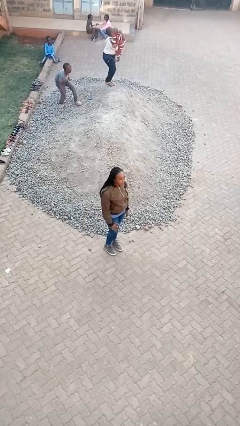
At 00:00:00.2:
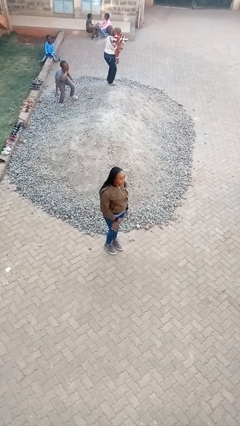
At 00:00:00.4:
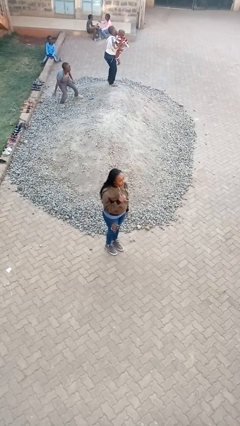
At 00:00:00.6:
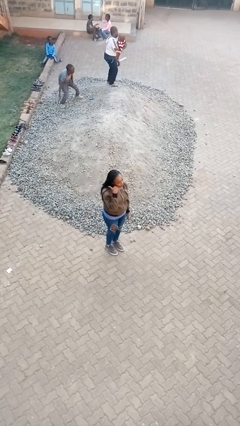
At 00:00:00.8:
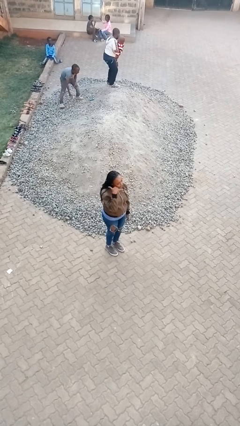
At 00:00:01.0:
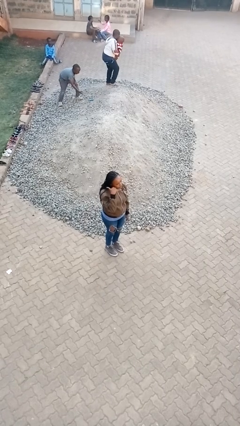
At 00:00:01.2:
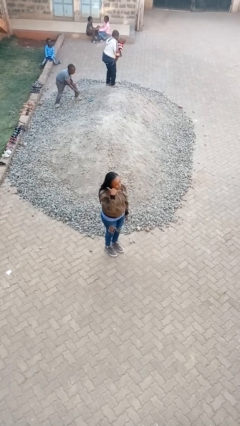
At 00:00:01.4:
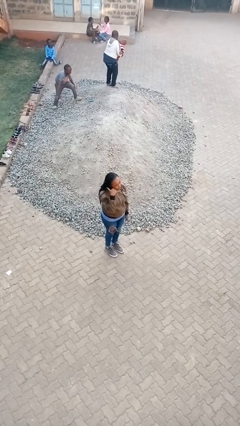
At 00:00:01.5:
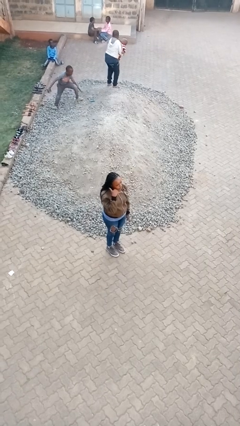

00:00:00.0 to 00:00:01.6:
person gestures call me

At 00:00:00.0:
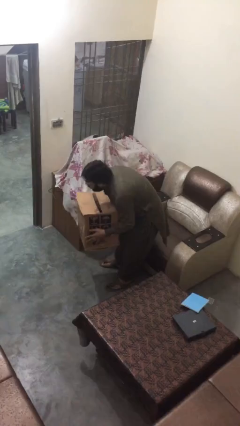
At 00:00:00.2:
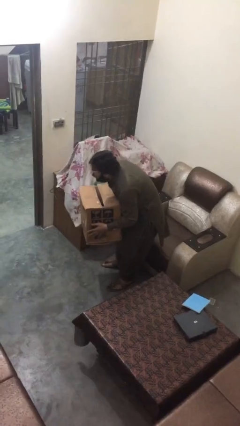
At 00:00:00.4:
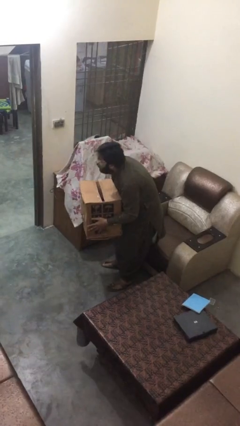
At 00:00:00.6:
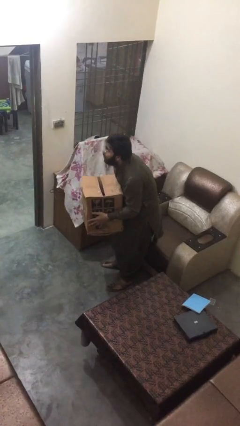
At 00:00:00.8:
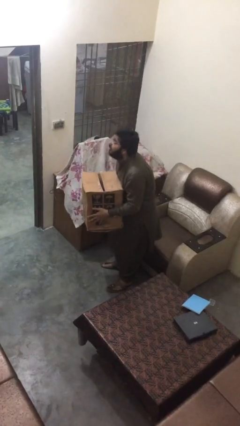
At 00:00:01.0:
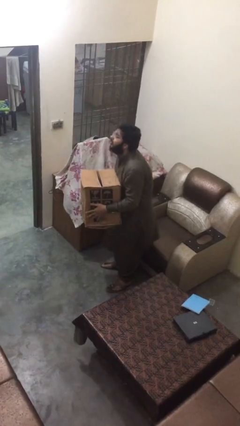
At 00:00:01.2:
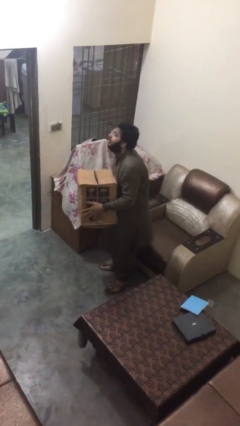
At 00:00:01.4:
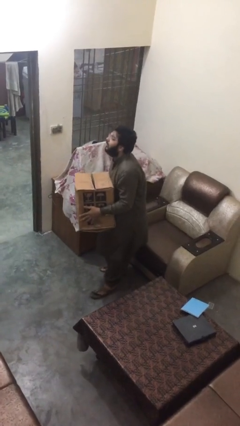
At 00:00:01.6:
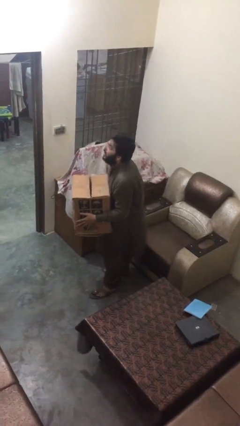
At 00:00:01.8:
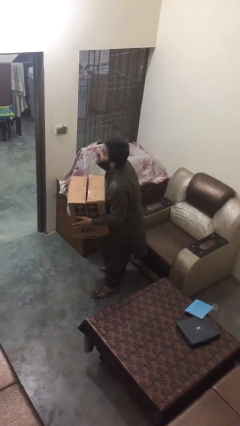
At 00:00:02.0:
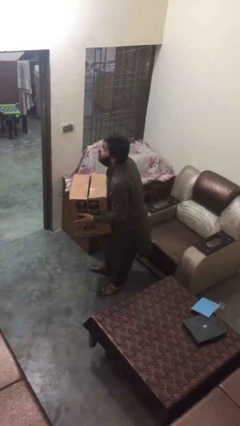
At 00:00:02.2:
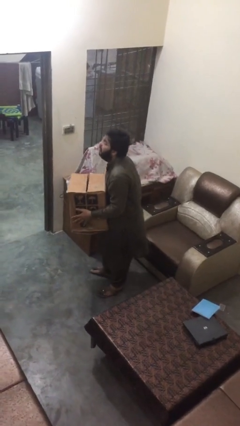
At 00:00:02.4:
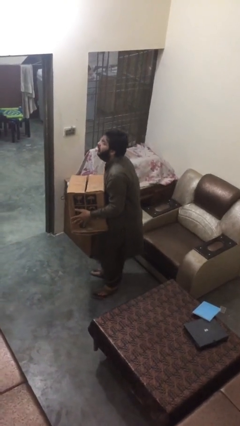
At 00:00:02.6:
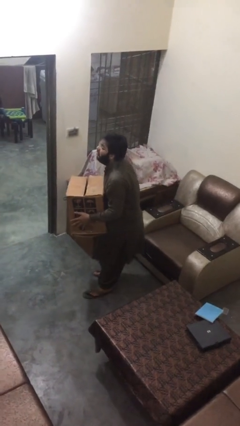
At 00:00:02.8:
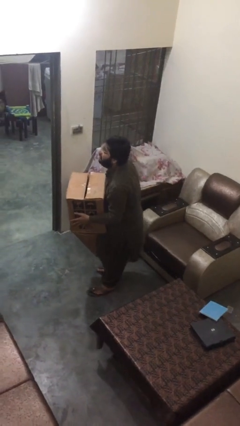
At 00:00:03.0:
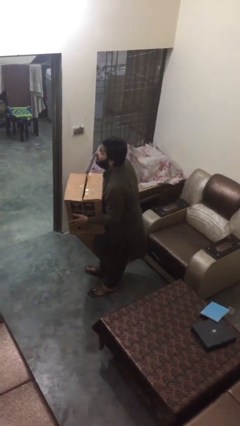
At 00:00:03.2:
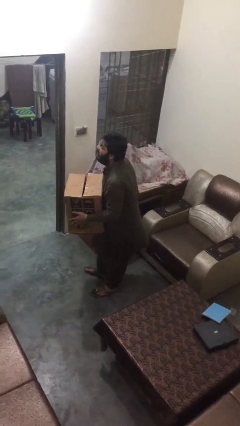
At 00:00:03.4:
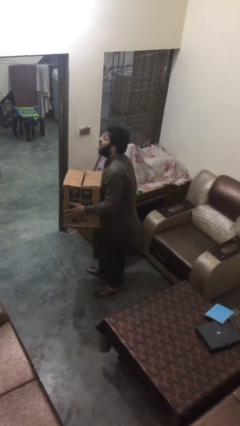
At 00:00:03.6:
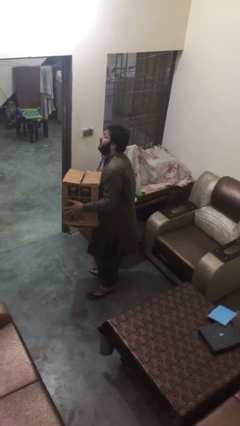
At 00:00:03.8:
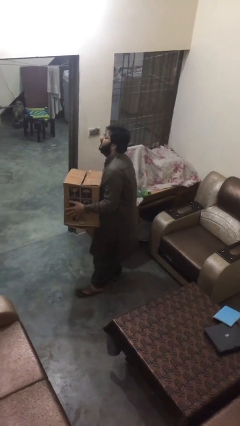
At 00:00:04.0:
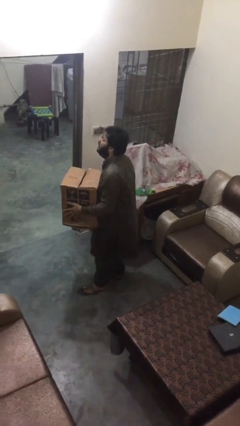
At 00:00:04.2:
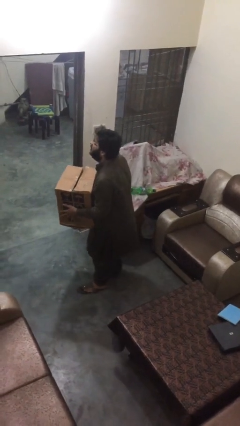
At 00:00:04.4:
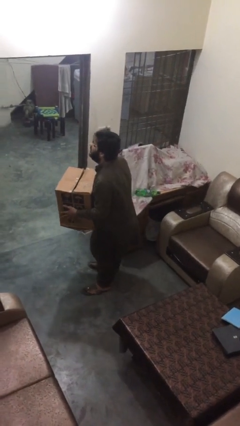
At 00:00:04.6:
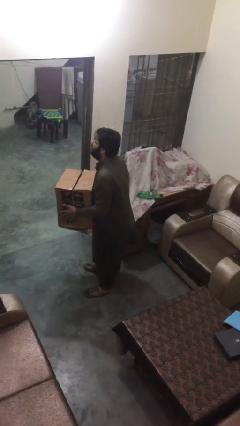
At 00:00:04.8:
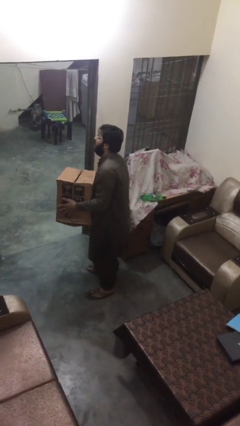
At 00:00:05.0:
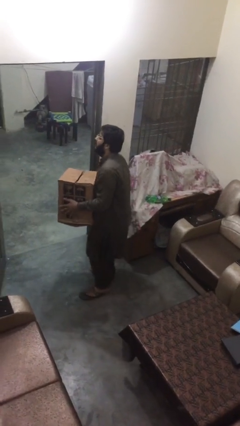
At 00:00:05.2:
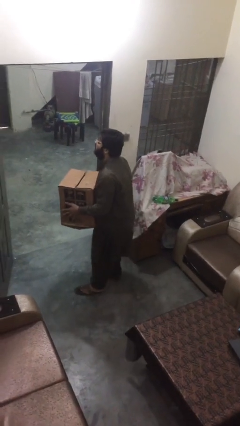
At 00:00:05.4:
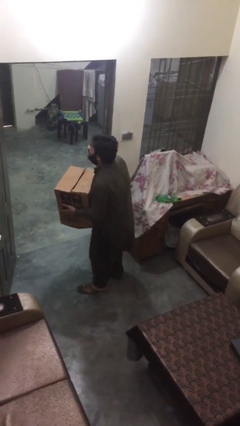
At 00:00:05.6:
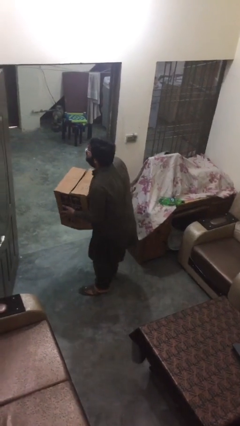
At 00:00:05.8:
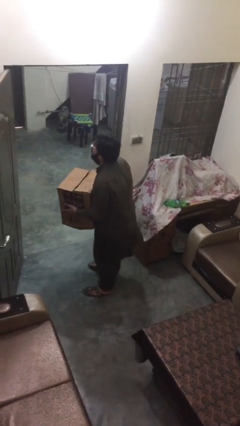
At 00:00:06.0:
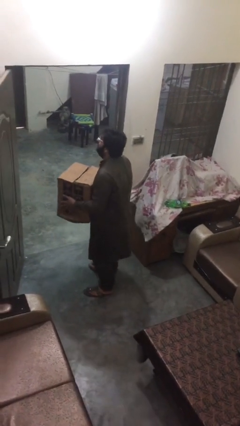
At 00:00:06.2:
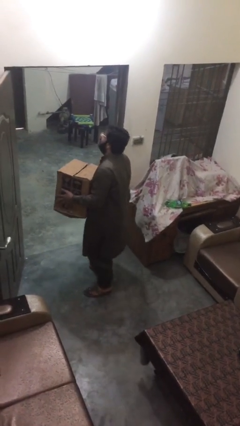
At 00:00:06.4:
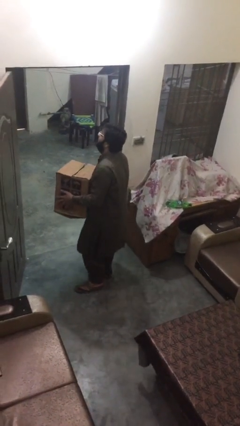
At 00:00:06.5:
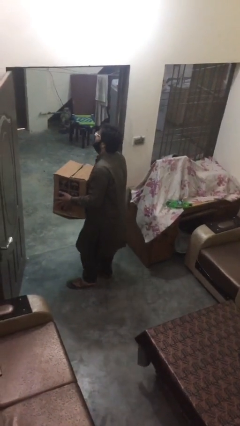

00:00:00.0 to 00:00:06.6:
person carries heavy object

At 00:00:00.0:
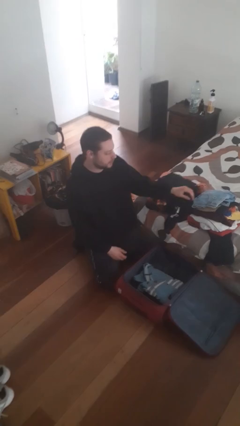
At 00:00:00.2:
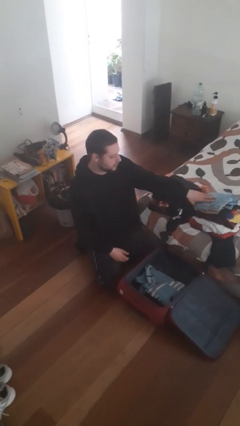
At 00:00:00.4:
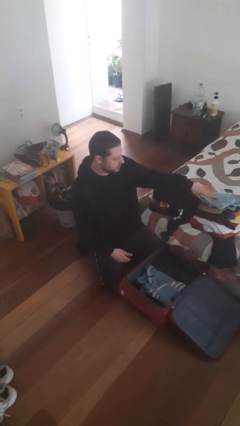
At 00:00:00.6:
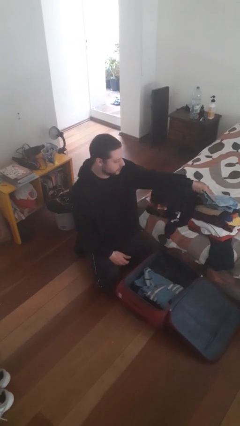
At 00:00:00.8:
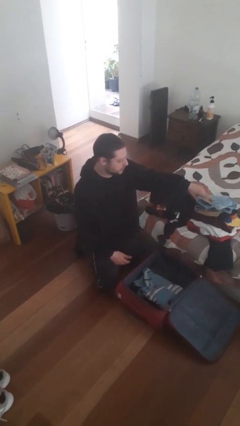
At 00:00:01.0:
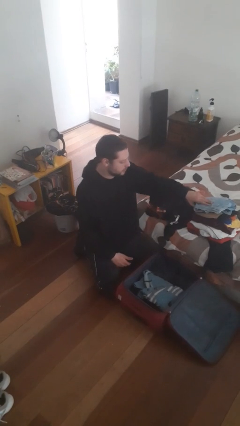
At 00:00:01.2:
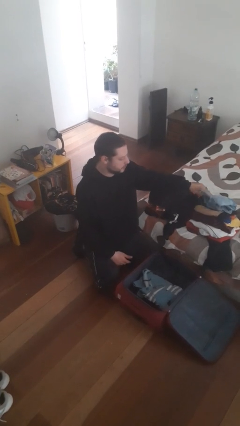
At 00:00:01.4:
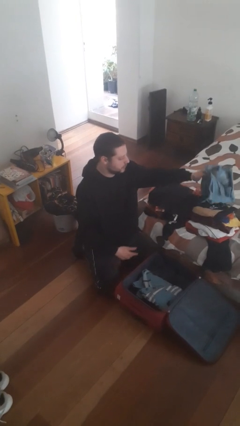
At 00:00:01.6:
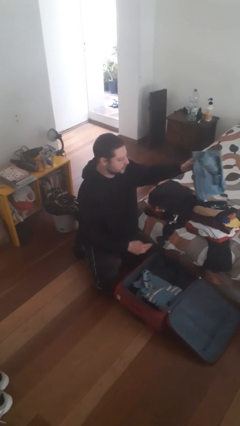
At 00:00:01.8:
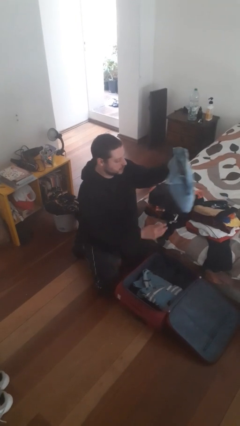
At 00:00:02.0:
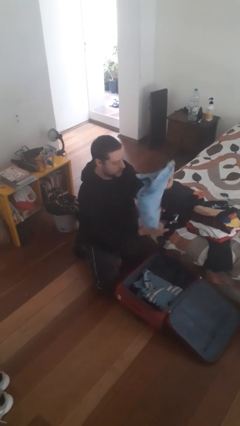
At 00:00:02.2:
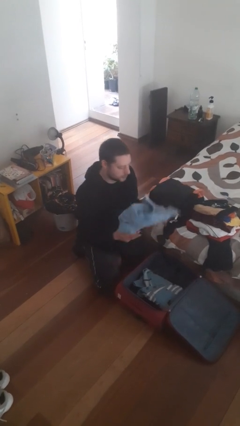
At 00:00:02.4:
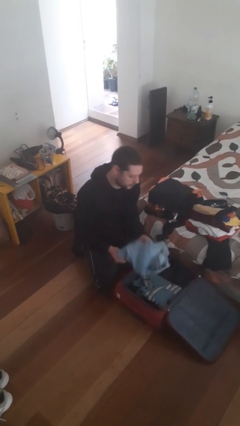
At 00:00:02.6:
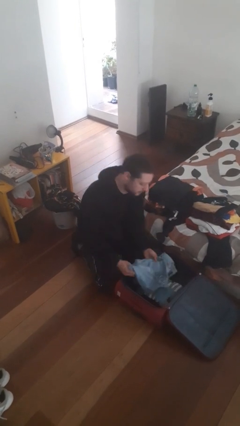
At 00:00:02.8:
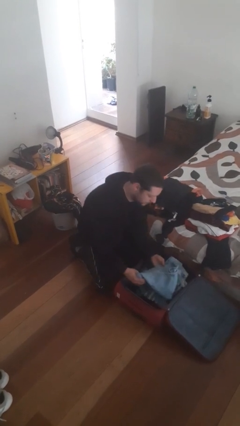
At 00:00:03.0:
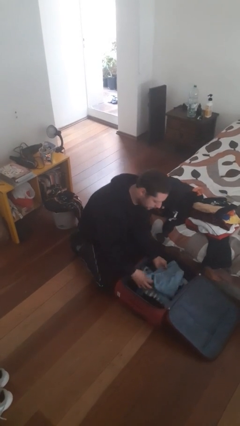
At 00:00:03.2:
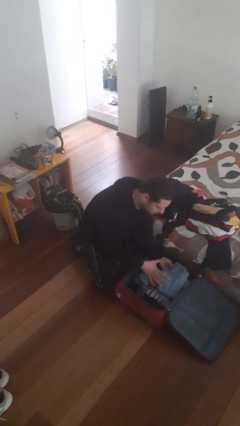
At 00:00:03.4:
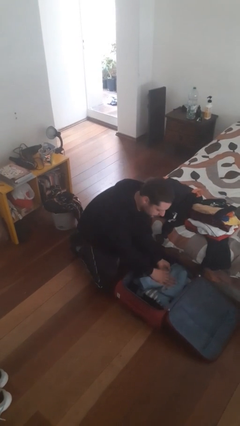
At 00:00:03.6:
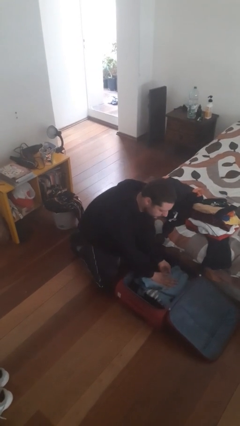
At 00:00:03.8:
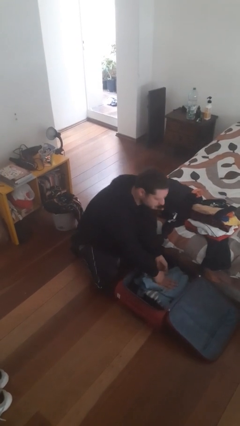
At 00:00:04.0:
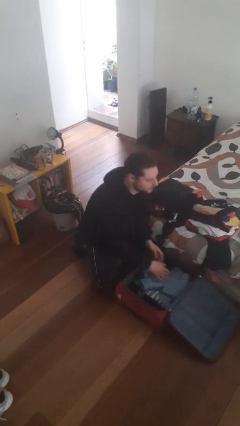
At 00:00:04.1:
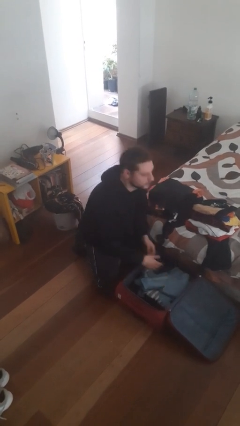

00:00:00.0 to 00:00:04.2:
person loads clothes into suitcase

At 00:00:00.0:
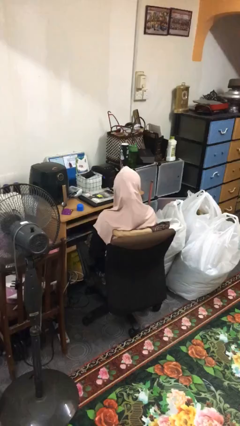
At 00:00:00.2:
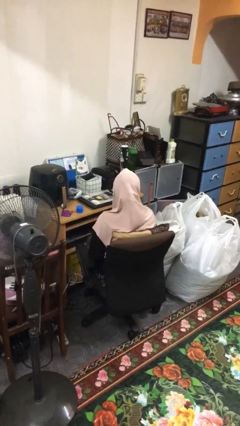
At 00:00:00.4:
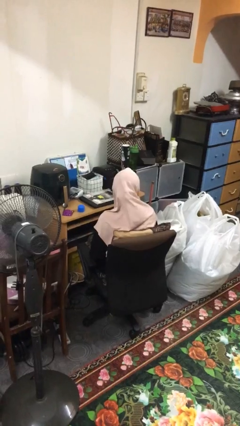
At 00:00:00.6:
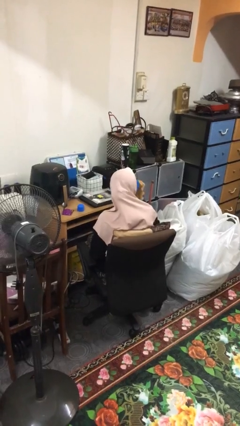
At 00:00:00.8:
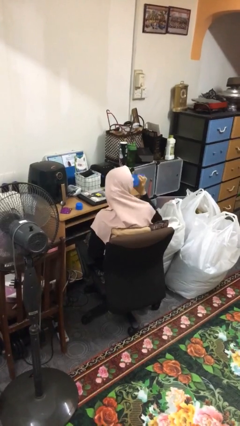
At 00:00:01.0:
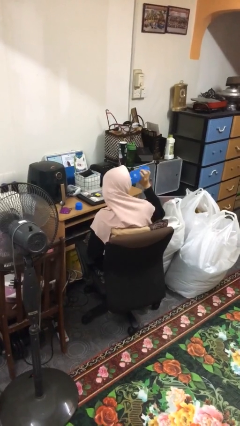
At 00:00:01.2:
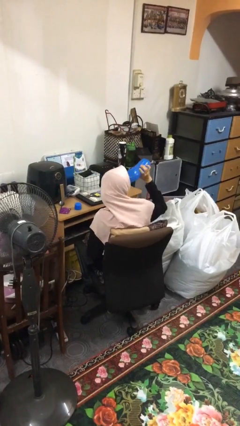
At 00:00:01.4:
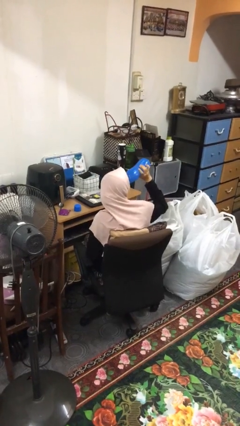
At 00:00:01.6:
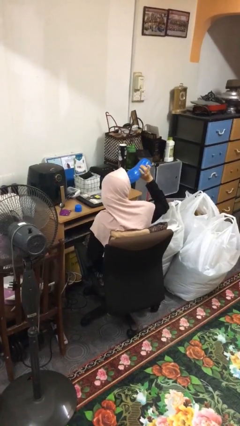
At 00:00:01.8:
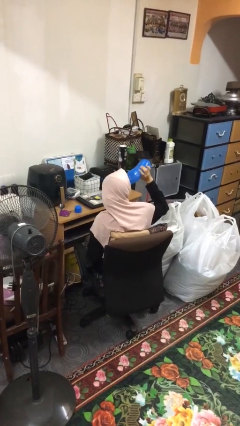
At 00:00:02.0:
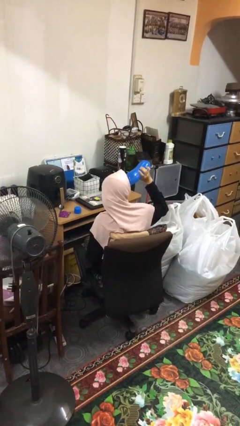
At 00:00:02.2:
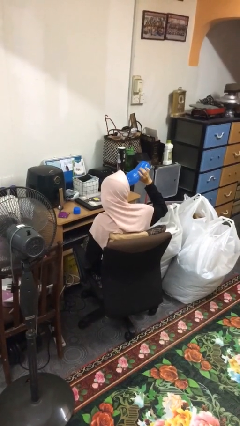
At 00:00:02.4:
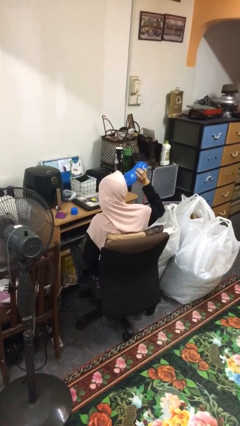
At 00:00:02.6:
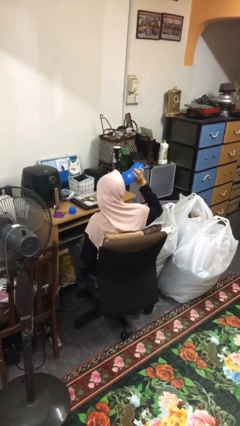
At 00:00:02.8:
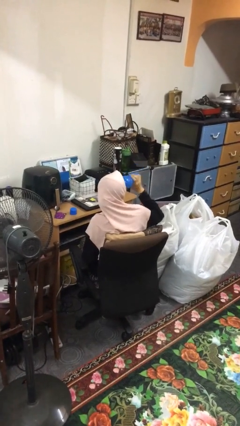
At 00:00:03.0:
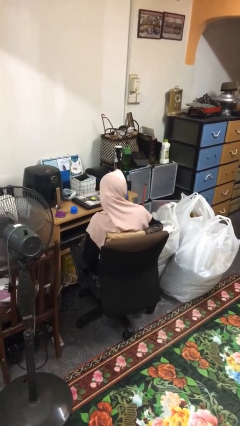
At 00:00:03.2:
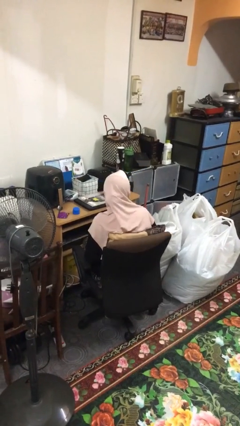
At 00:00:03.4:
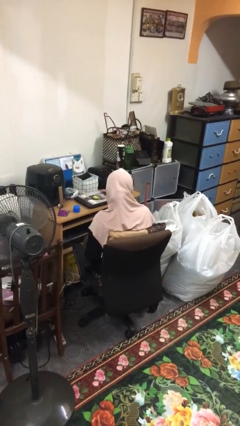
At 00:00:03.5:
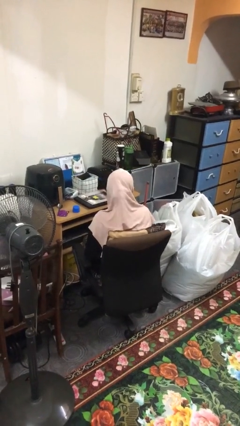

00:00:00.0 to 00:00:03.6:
person drinks from bottle

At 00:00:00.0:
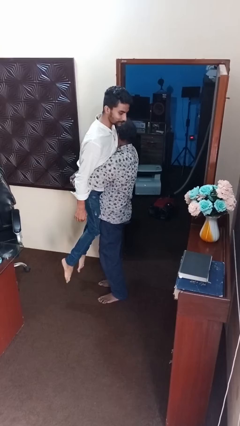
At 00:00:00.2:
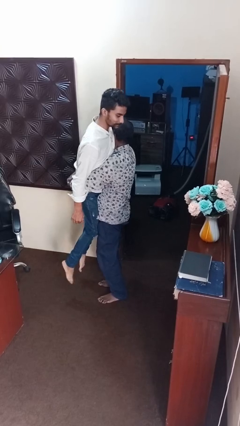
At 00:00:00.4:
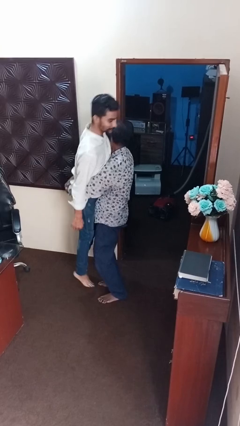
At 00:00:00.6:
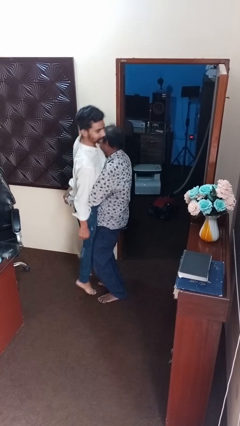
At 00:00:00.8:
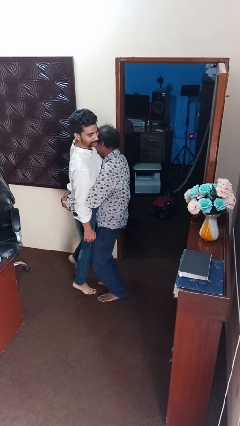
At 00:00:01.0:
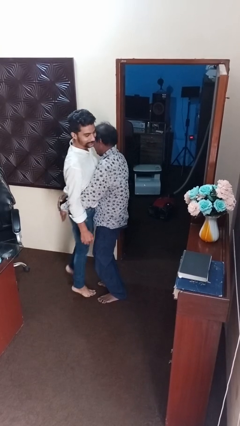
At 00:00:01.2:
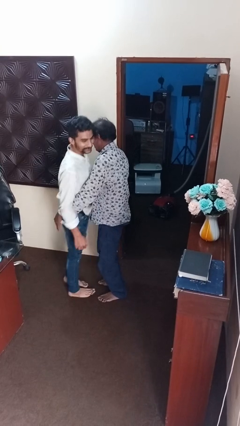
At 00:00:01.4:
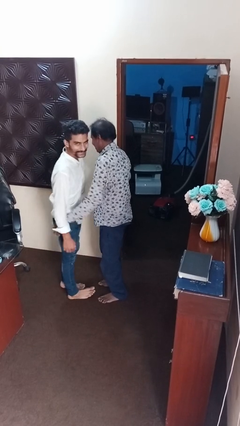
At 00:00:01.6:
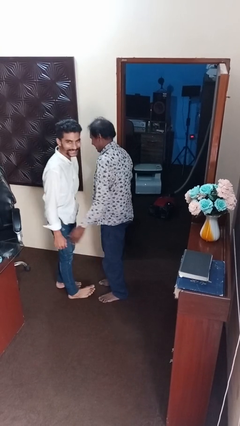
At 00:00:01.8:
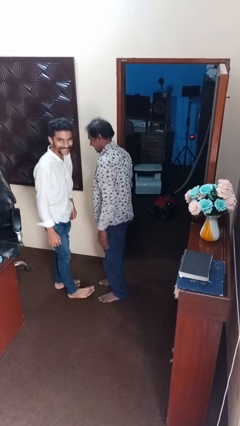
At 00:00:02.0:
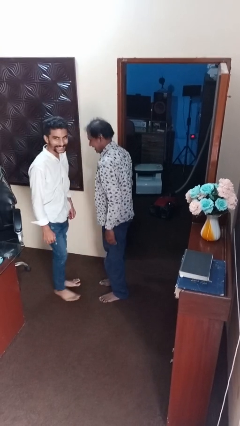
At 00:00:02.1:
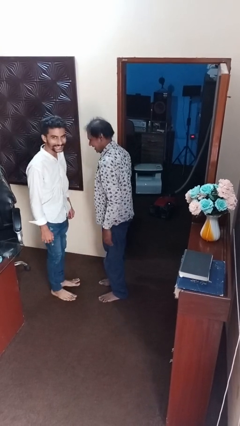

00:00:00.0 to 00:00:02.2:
person puts down person
